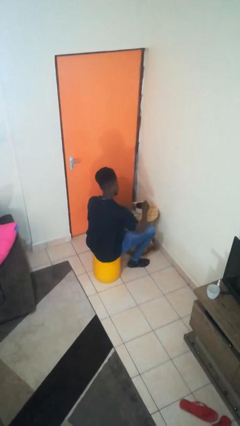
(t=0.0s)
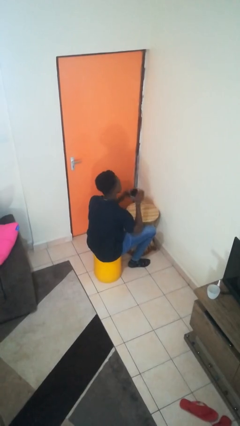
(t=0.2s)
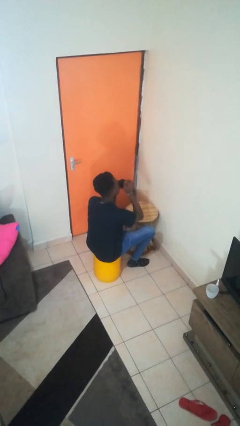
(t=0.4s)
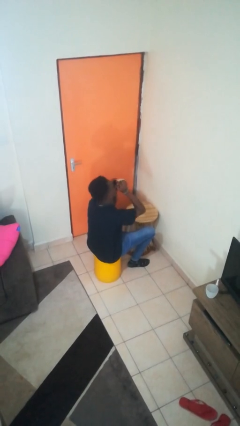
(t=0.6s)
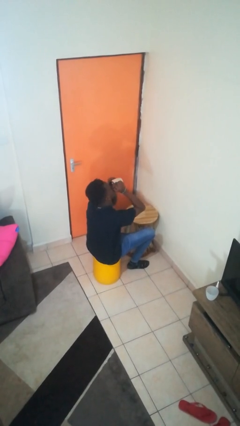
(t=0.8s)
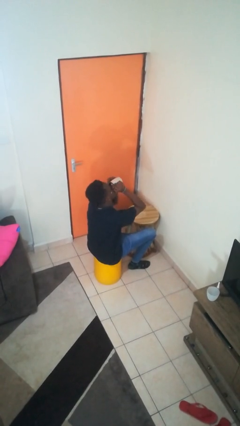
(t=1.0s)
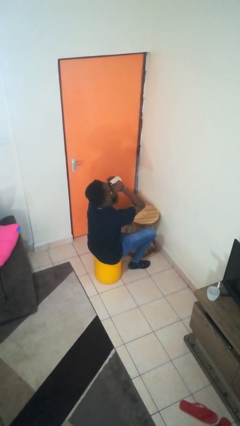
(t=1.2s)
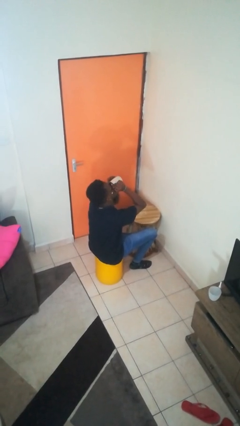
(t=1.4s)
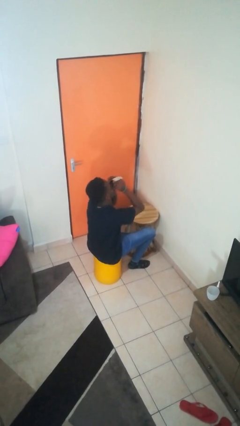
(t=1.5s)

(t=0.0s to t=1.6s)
person drinks from mug

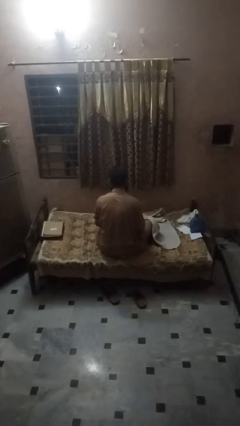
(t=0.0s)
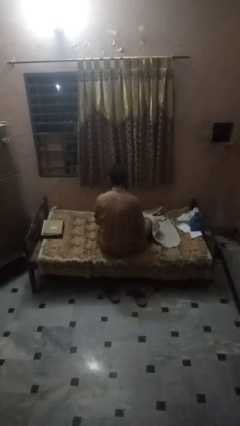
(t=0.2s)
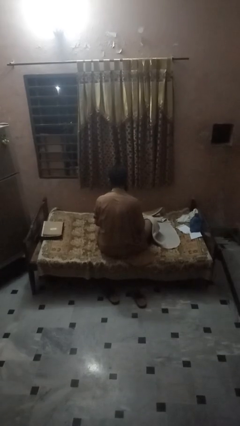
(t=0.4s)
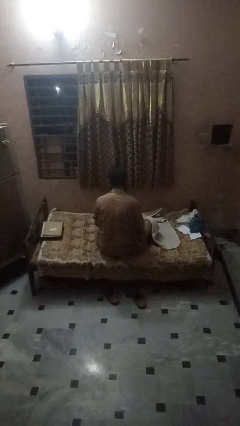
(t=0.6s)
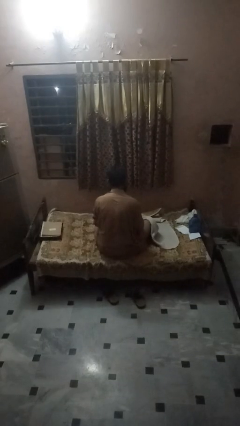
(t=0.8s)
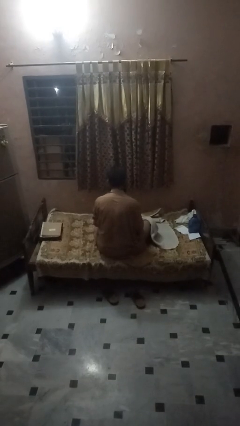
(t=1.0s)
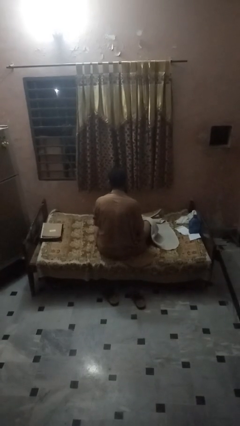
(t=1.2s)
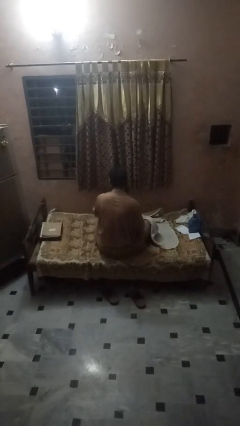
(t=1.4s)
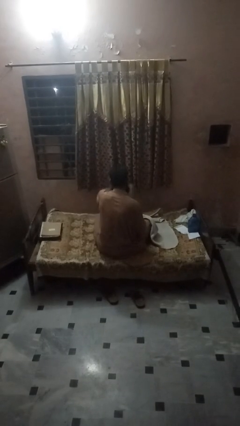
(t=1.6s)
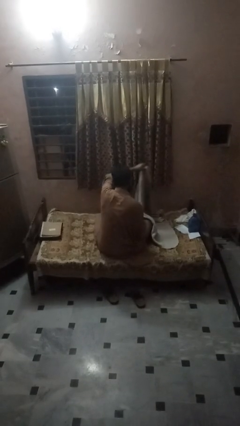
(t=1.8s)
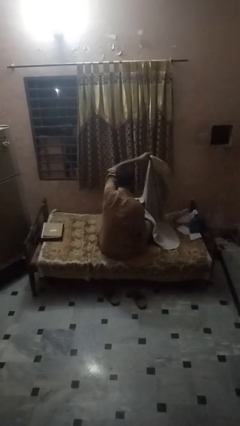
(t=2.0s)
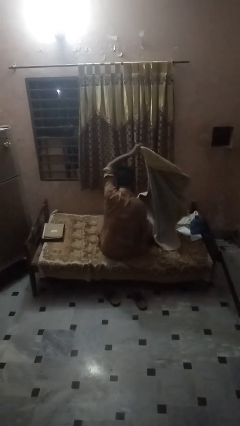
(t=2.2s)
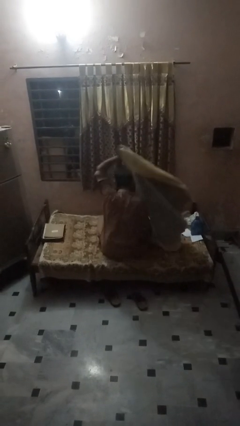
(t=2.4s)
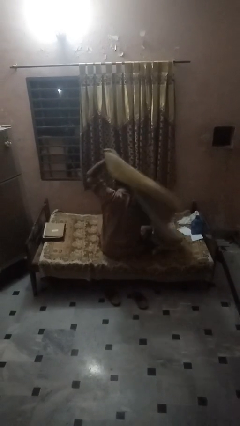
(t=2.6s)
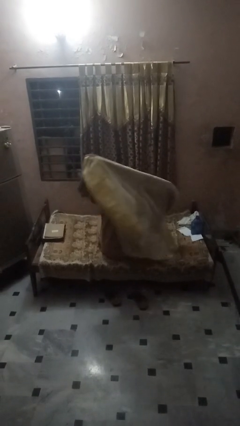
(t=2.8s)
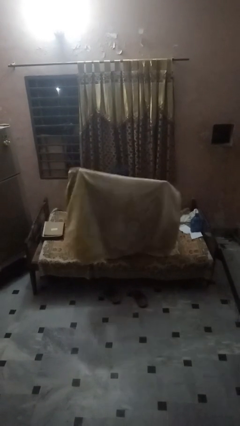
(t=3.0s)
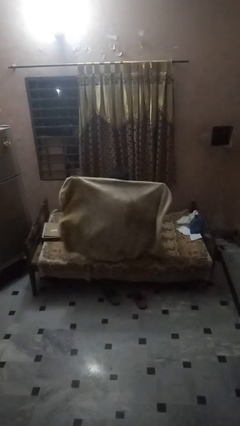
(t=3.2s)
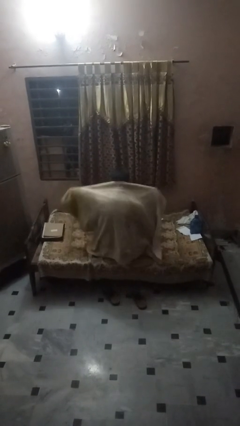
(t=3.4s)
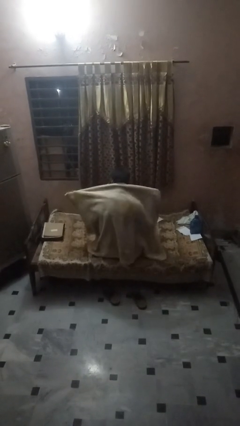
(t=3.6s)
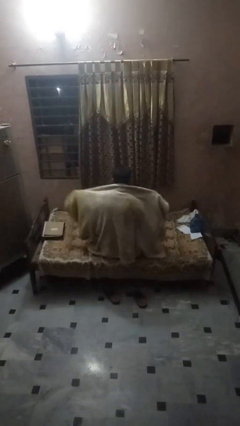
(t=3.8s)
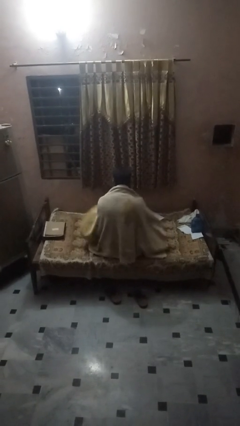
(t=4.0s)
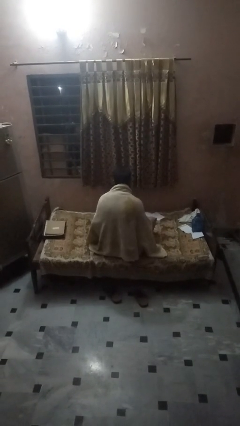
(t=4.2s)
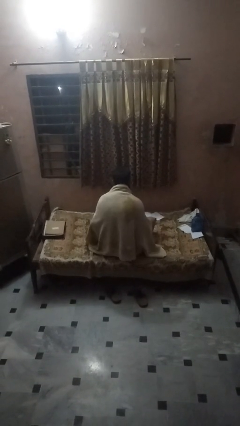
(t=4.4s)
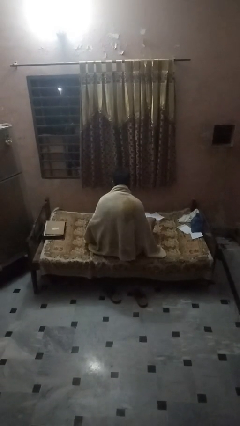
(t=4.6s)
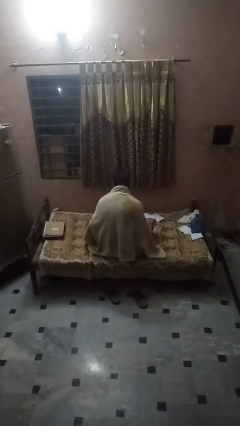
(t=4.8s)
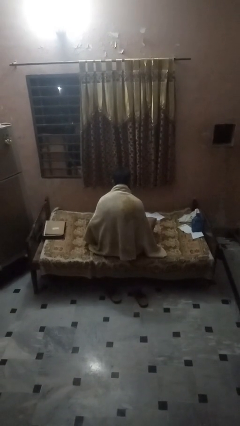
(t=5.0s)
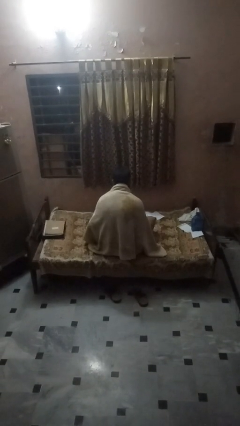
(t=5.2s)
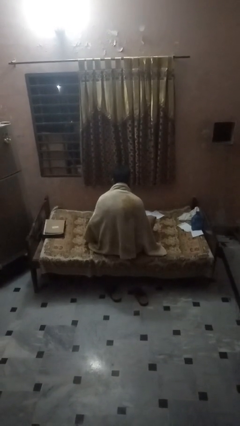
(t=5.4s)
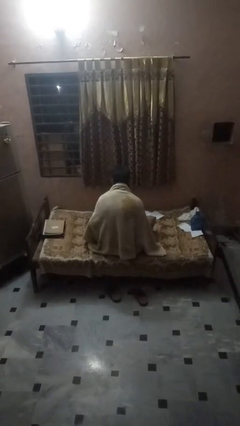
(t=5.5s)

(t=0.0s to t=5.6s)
person covers with blanket

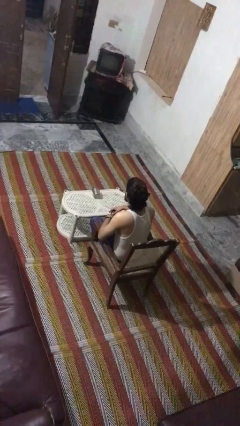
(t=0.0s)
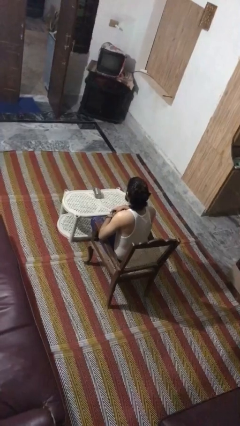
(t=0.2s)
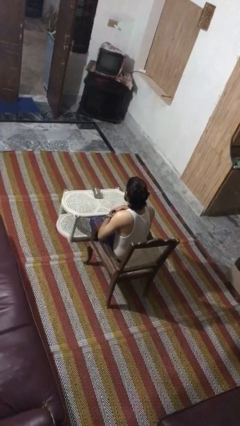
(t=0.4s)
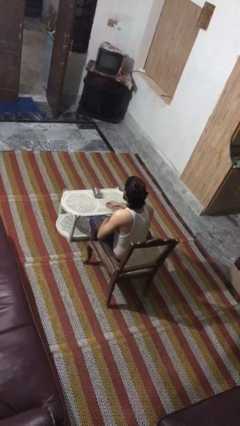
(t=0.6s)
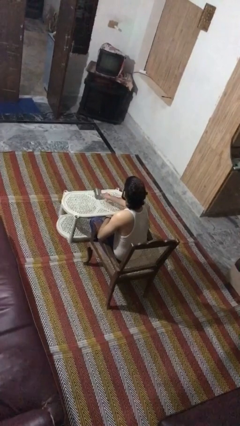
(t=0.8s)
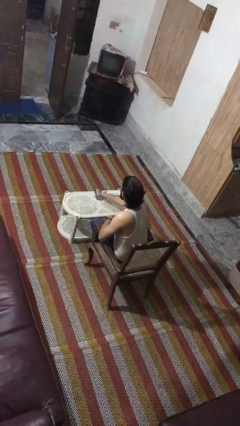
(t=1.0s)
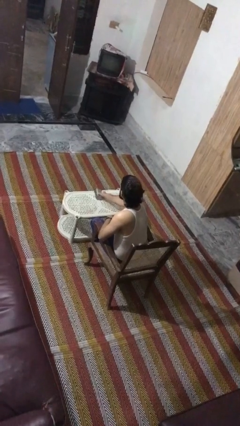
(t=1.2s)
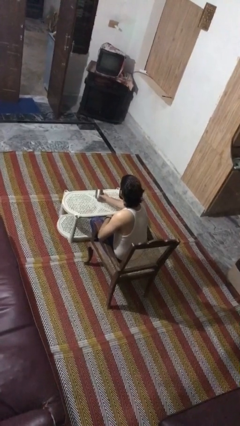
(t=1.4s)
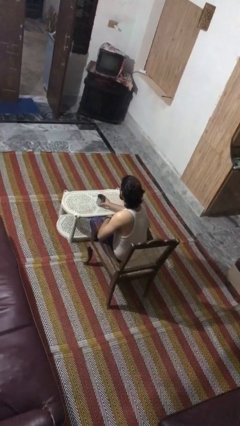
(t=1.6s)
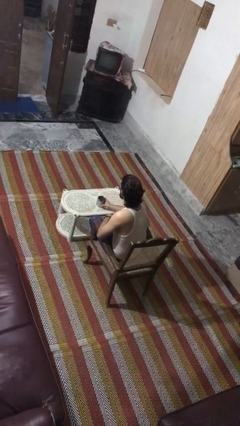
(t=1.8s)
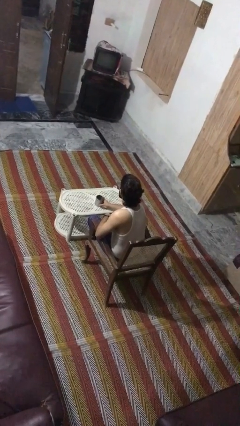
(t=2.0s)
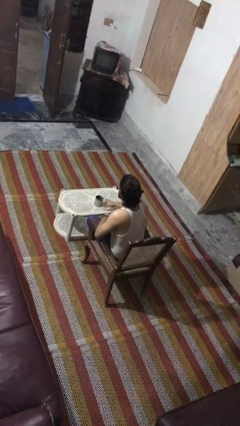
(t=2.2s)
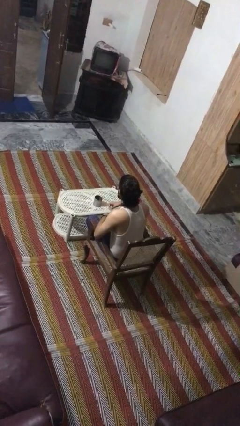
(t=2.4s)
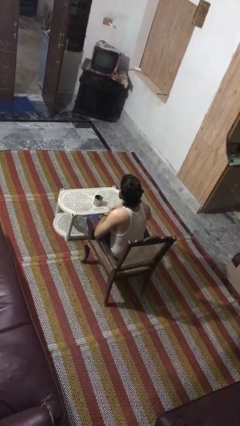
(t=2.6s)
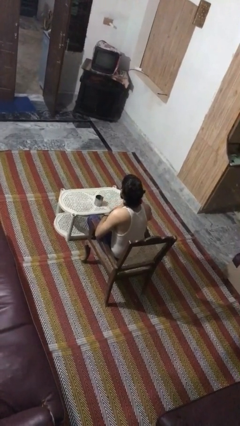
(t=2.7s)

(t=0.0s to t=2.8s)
person sets upright glass

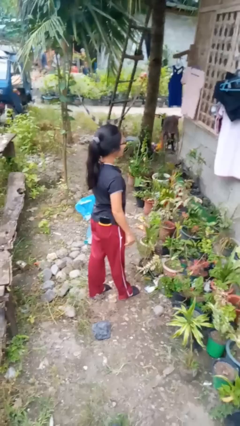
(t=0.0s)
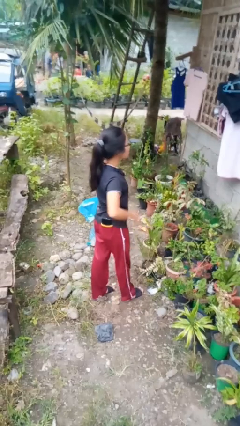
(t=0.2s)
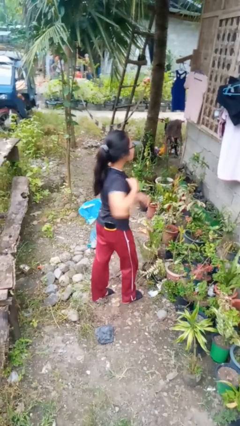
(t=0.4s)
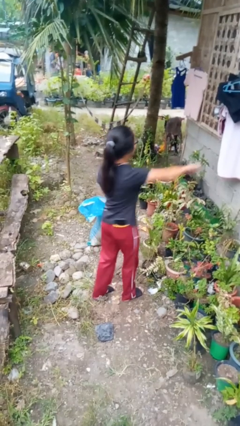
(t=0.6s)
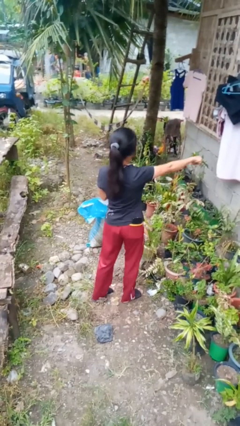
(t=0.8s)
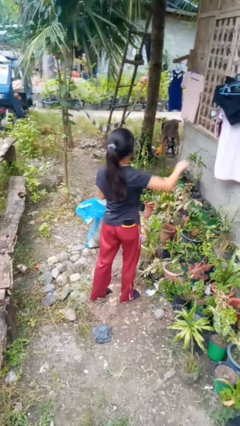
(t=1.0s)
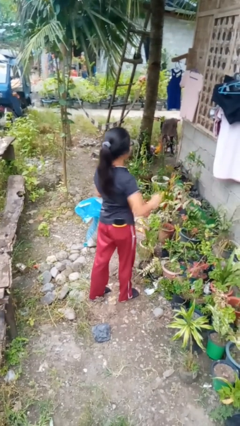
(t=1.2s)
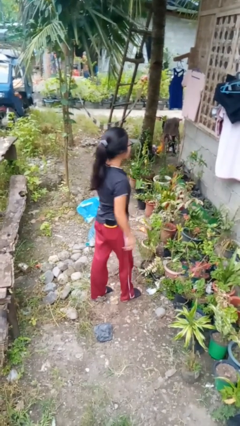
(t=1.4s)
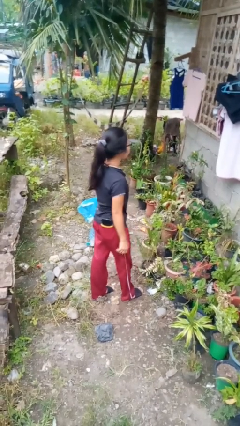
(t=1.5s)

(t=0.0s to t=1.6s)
person punches

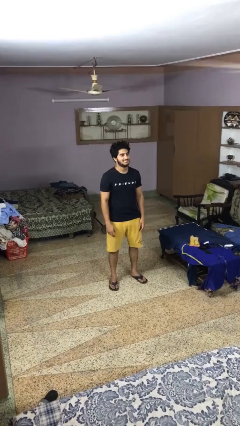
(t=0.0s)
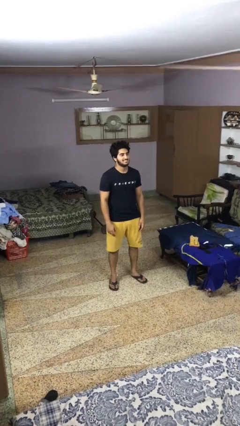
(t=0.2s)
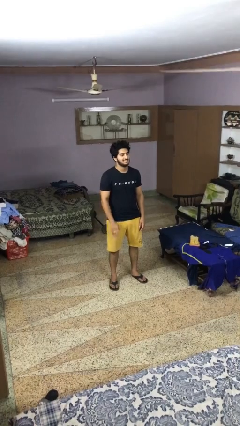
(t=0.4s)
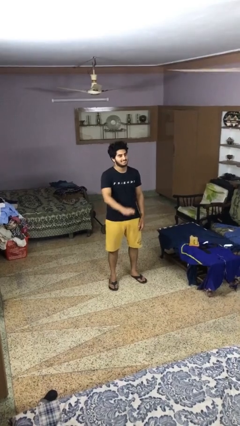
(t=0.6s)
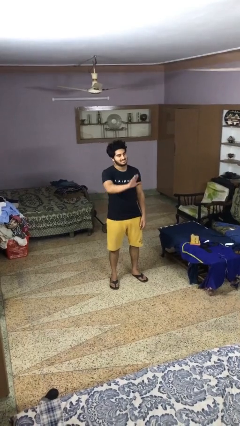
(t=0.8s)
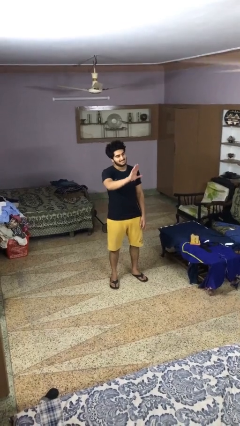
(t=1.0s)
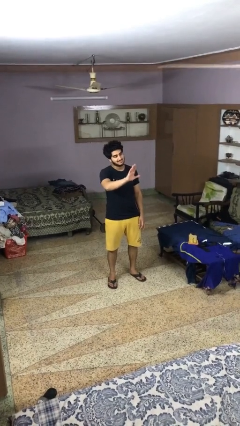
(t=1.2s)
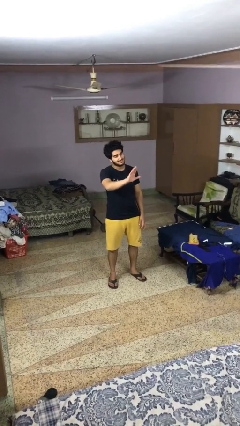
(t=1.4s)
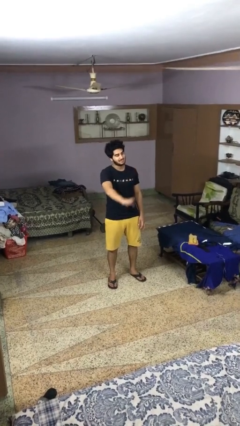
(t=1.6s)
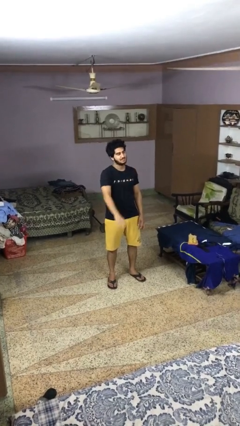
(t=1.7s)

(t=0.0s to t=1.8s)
person gestures stop

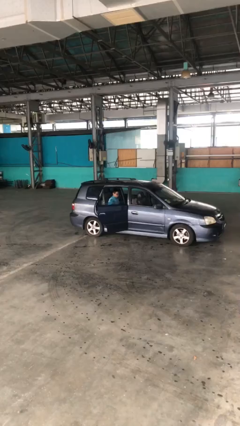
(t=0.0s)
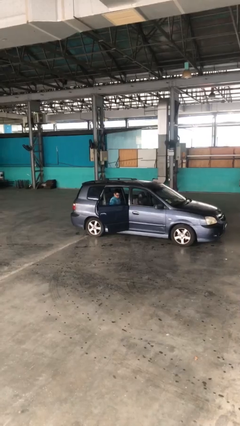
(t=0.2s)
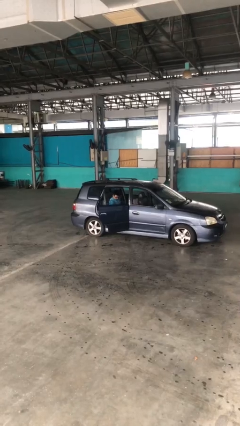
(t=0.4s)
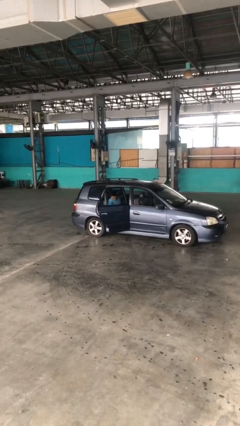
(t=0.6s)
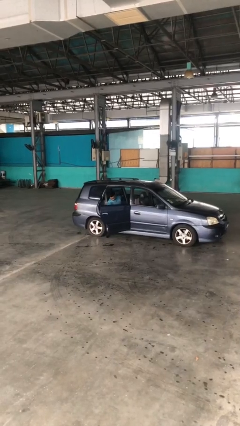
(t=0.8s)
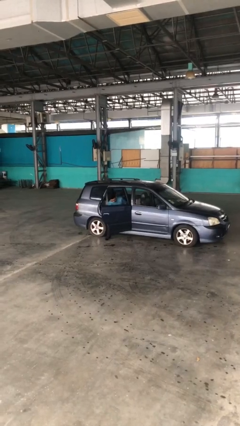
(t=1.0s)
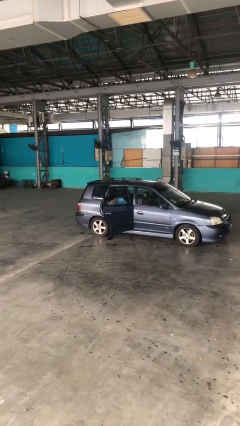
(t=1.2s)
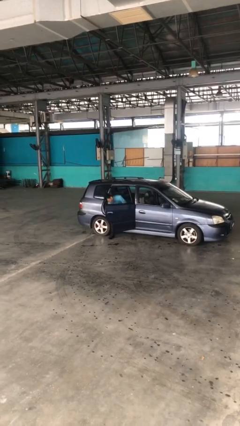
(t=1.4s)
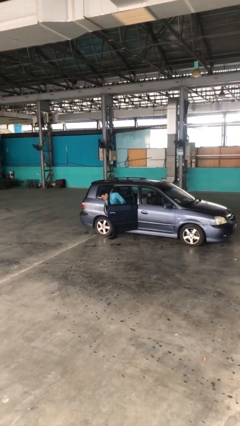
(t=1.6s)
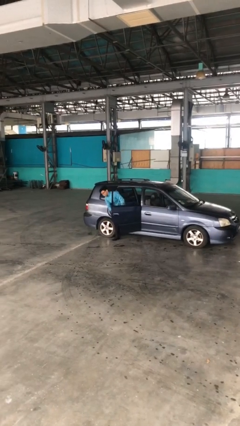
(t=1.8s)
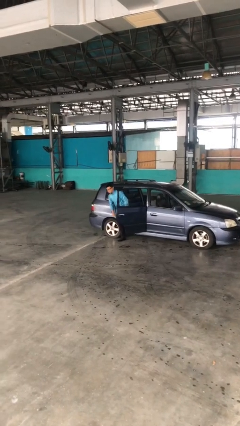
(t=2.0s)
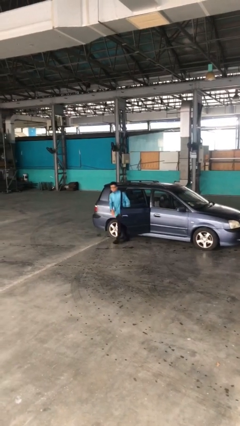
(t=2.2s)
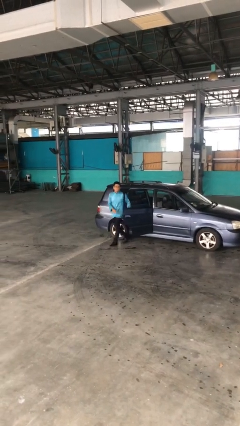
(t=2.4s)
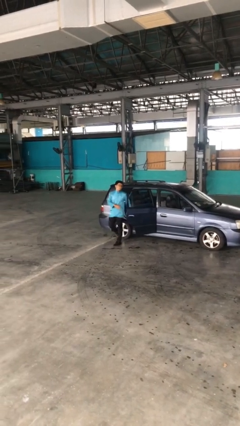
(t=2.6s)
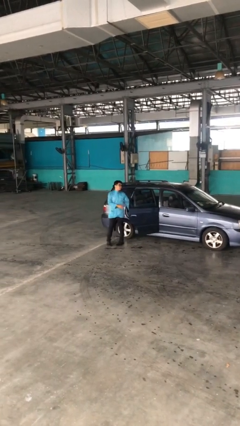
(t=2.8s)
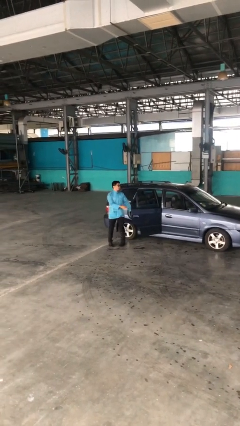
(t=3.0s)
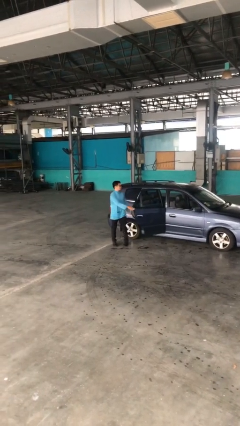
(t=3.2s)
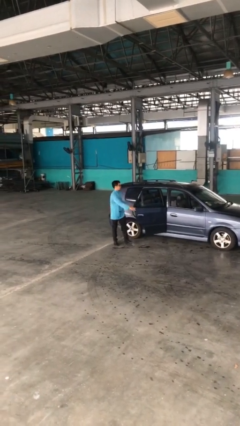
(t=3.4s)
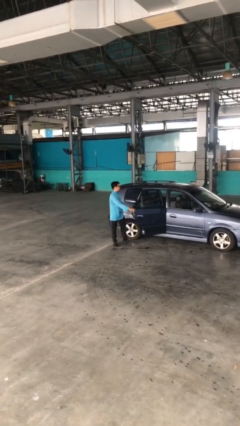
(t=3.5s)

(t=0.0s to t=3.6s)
person exits car

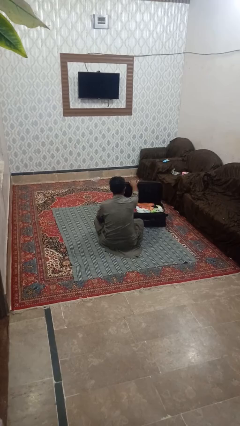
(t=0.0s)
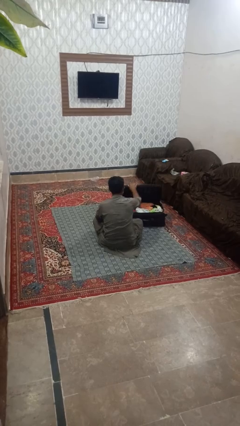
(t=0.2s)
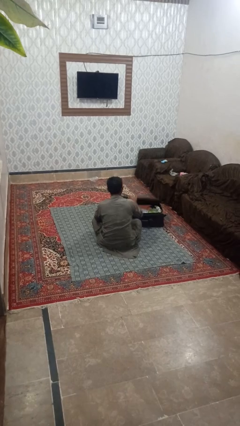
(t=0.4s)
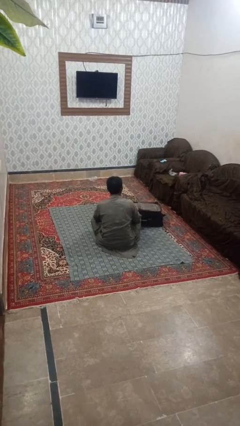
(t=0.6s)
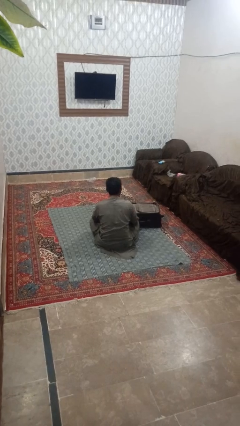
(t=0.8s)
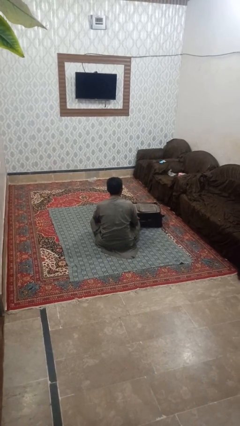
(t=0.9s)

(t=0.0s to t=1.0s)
person closes suitcase
